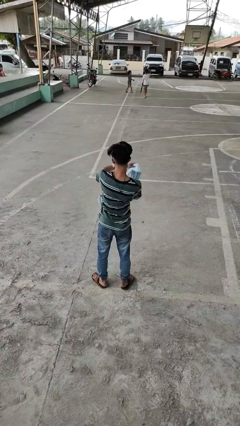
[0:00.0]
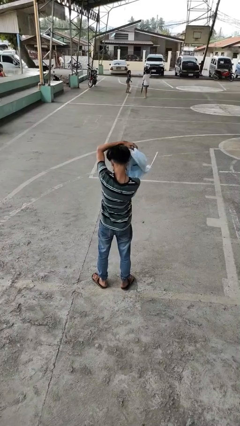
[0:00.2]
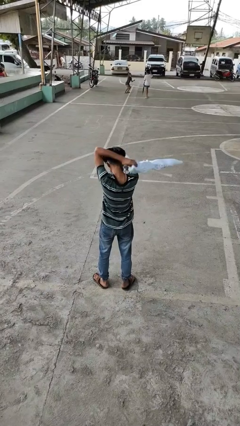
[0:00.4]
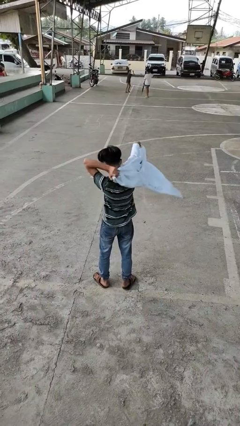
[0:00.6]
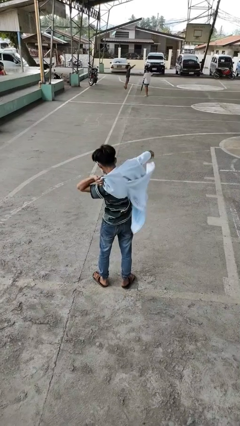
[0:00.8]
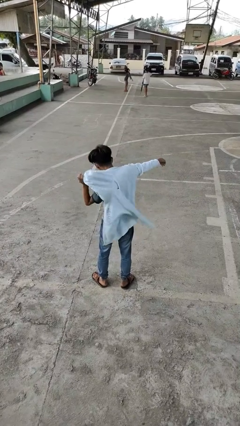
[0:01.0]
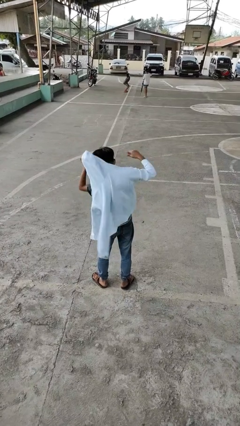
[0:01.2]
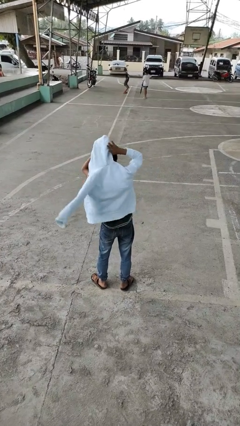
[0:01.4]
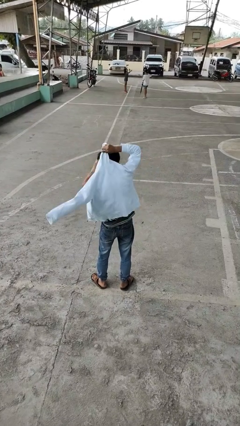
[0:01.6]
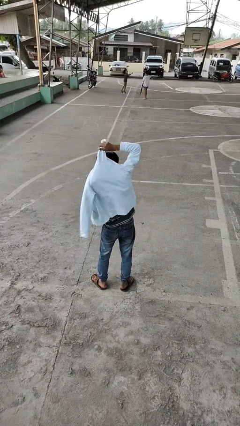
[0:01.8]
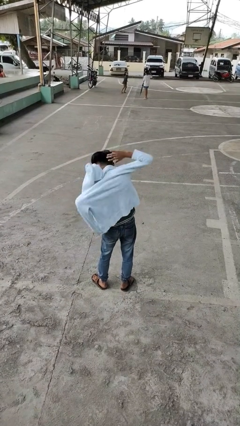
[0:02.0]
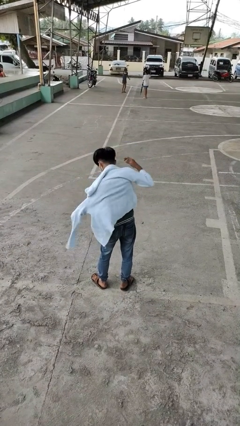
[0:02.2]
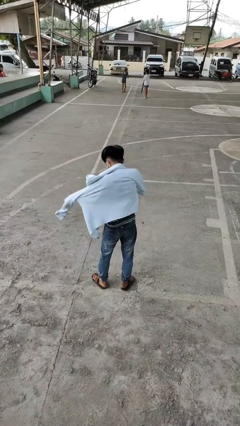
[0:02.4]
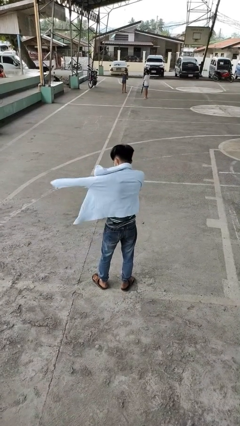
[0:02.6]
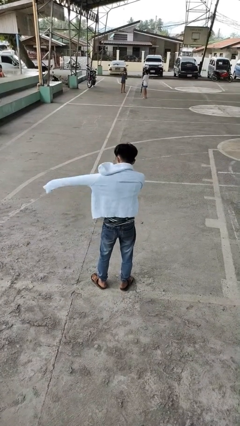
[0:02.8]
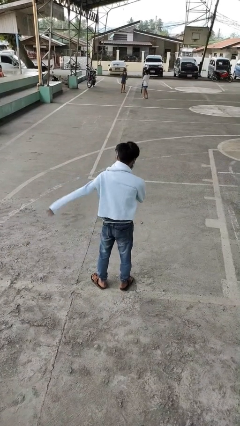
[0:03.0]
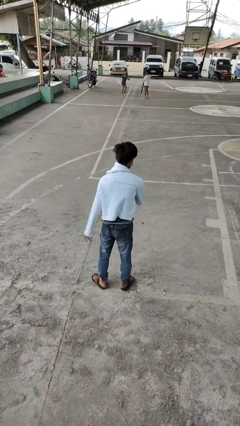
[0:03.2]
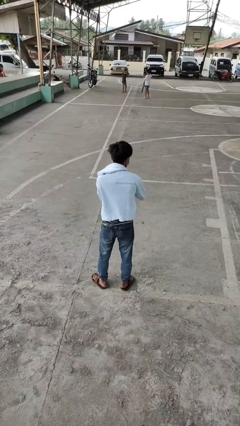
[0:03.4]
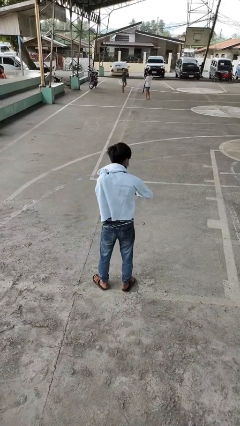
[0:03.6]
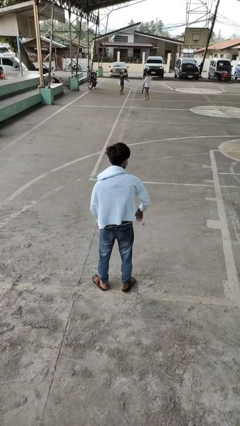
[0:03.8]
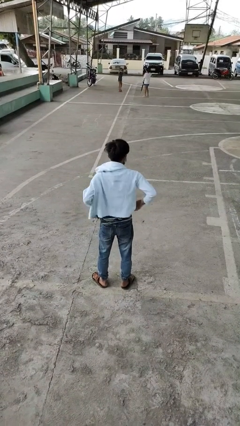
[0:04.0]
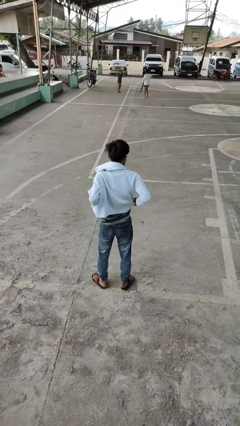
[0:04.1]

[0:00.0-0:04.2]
person puts on jacket

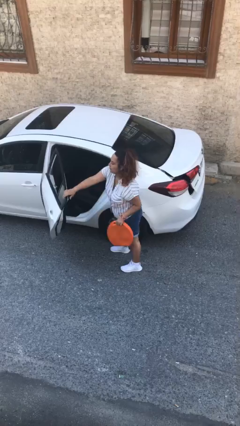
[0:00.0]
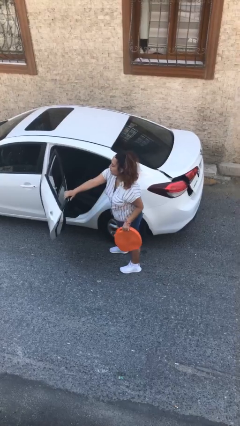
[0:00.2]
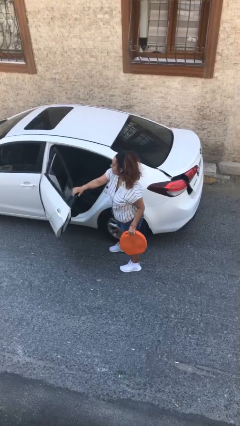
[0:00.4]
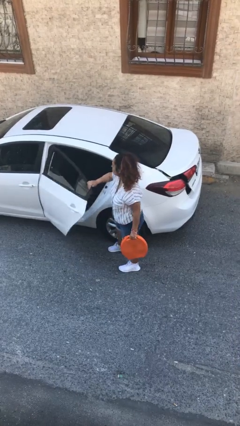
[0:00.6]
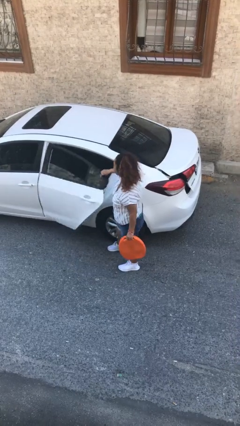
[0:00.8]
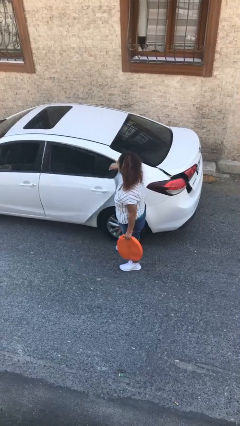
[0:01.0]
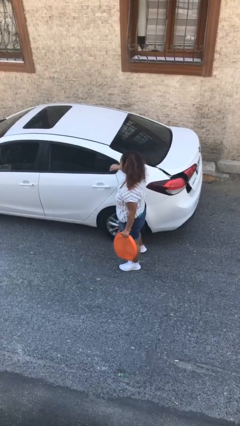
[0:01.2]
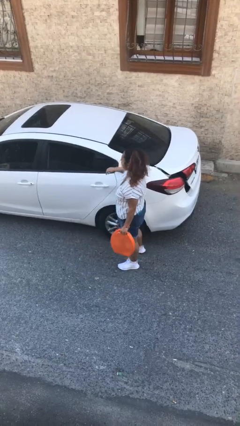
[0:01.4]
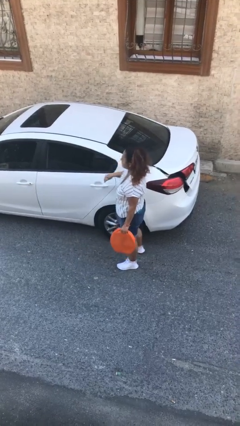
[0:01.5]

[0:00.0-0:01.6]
person closes car door

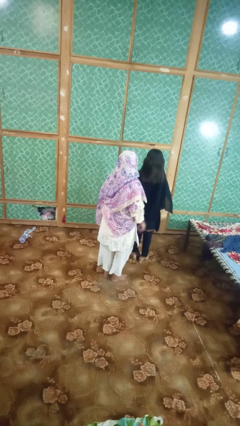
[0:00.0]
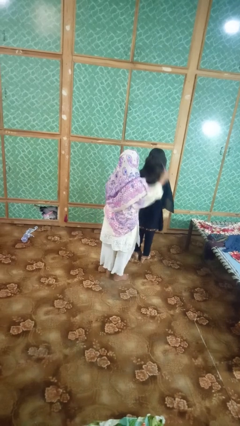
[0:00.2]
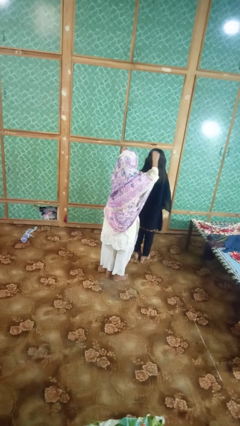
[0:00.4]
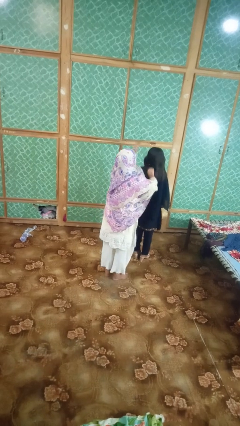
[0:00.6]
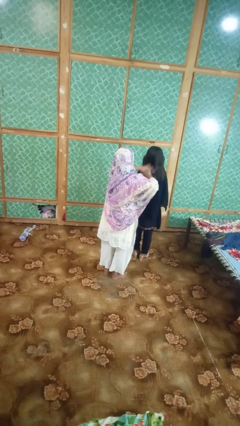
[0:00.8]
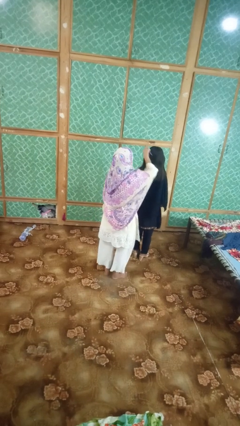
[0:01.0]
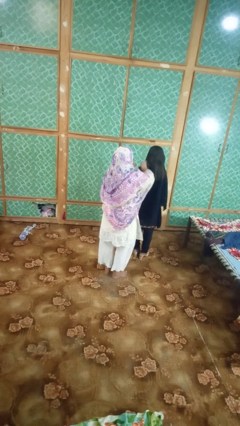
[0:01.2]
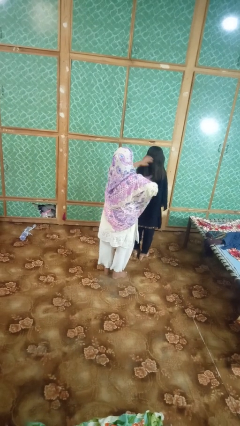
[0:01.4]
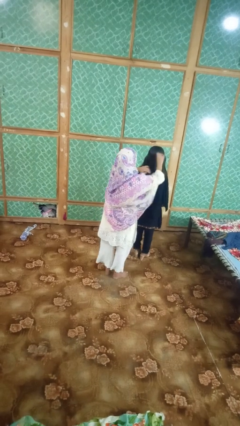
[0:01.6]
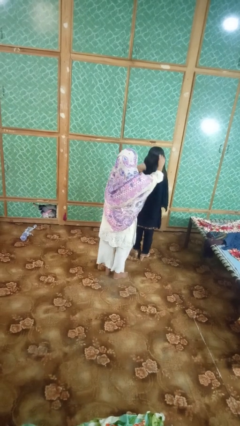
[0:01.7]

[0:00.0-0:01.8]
person brushes hair of person

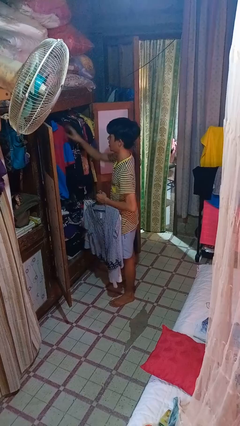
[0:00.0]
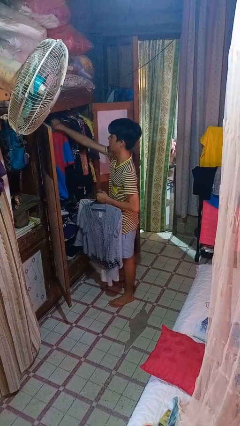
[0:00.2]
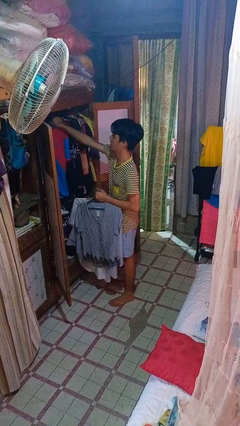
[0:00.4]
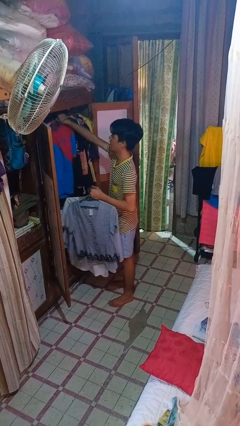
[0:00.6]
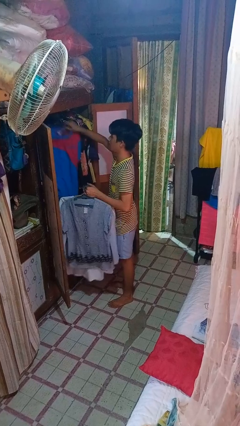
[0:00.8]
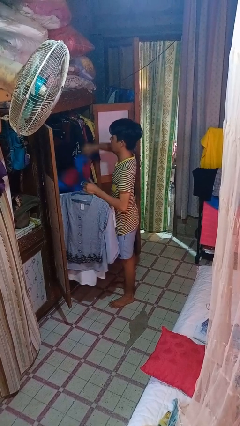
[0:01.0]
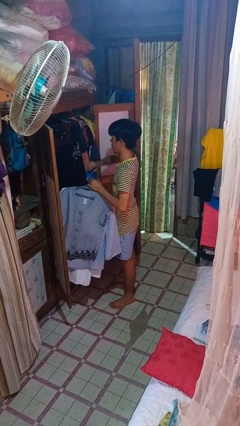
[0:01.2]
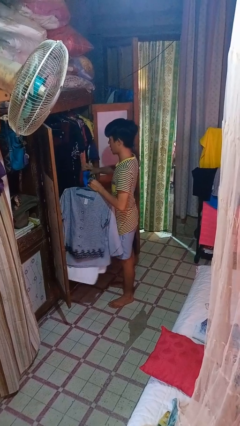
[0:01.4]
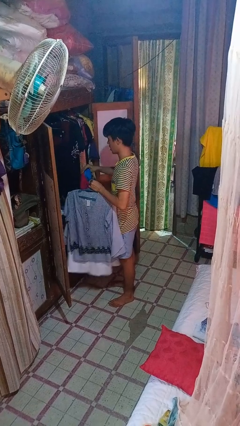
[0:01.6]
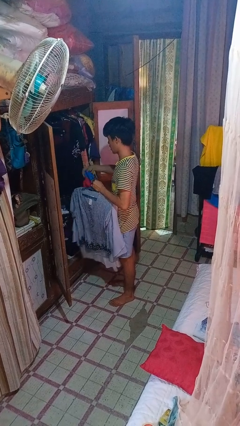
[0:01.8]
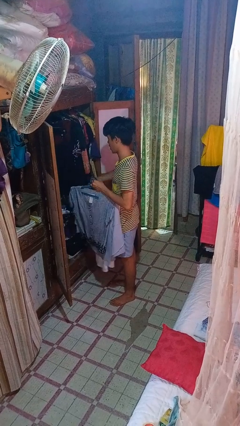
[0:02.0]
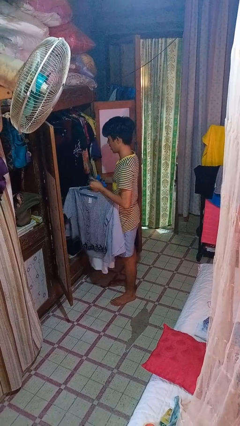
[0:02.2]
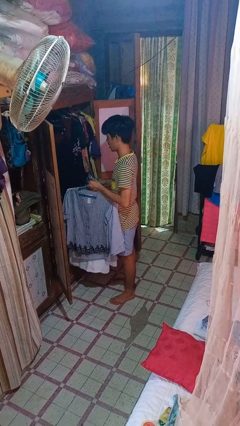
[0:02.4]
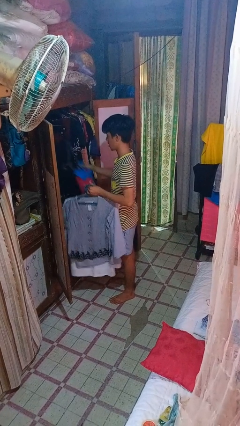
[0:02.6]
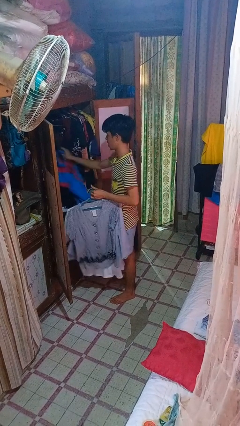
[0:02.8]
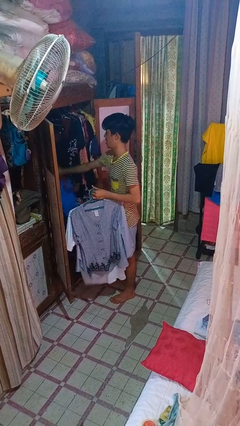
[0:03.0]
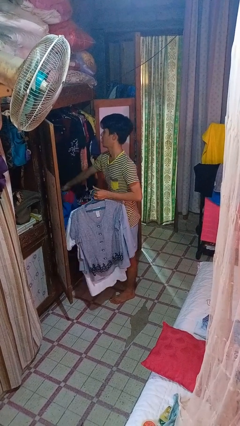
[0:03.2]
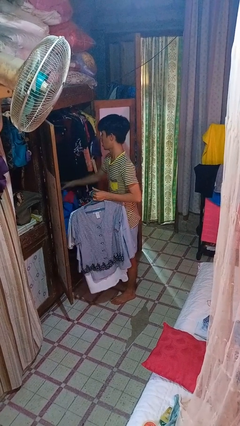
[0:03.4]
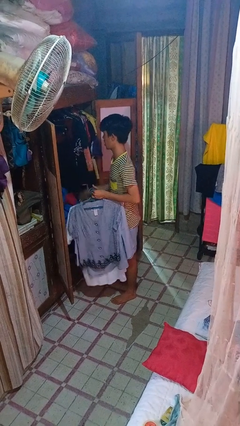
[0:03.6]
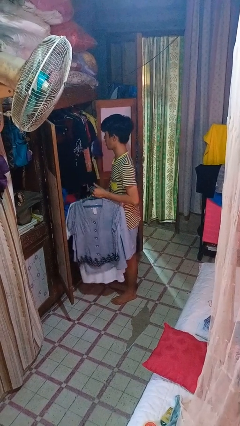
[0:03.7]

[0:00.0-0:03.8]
person takes clothes from closet

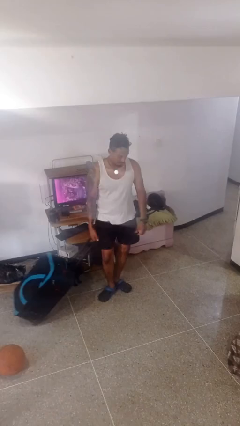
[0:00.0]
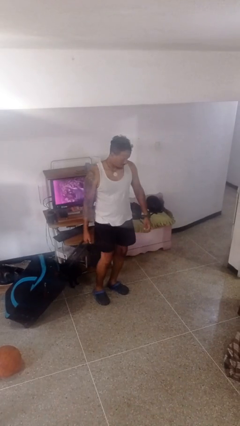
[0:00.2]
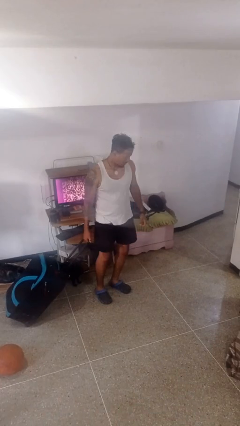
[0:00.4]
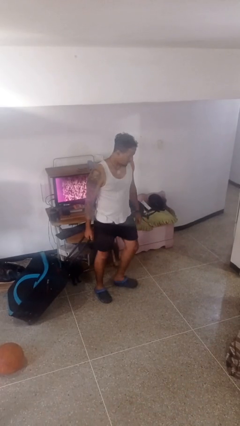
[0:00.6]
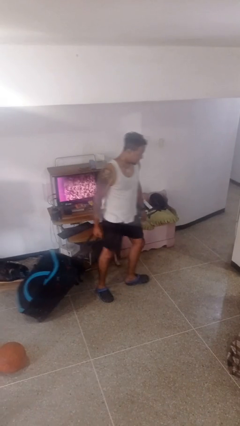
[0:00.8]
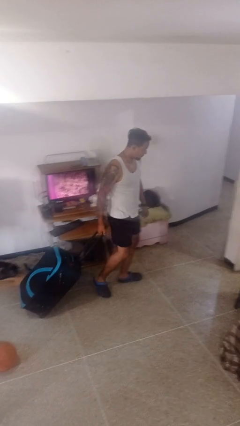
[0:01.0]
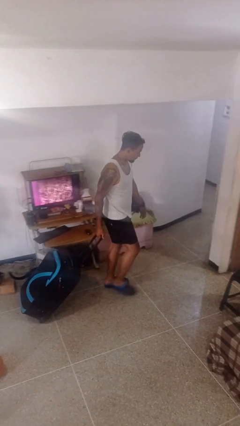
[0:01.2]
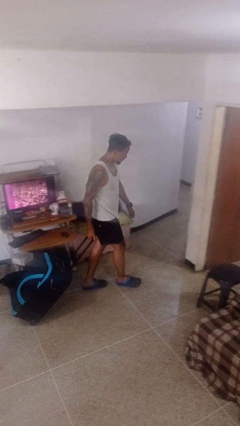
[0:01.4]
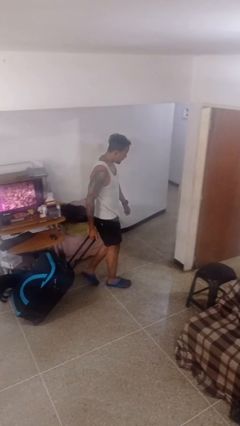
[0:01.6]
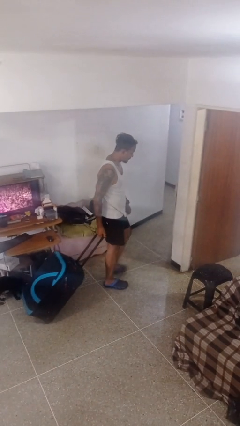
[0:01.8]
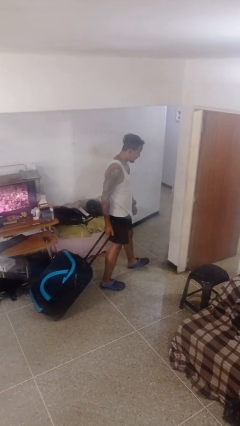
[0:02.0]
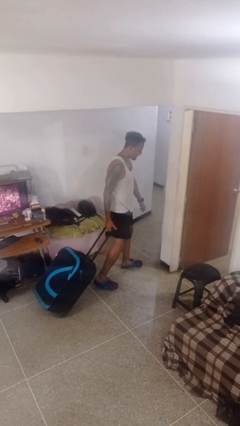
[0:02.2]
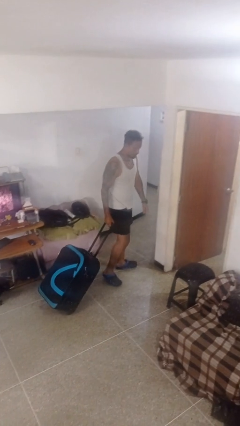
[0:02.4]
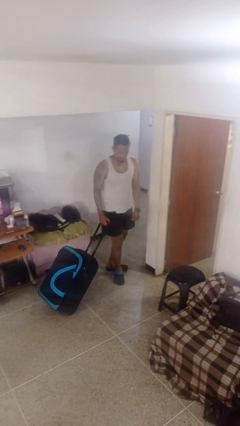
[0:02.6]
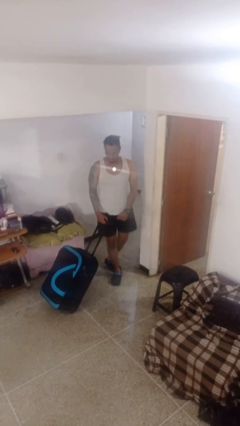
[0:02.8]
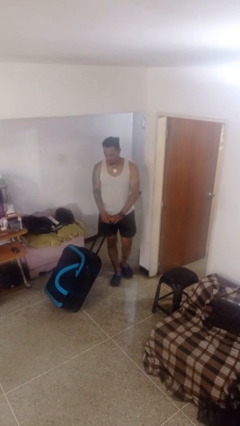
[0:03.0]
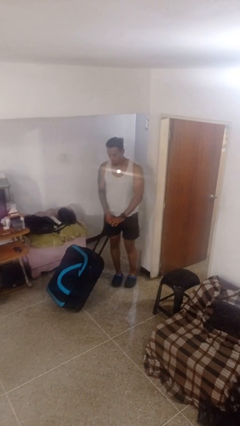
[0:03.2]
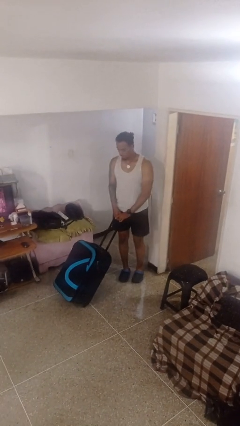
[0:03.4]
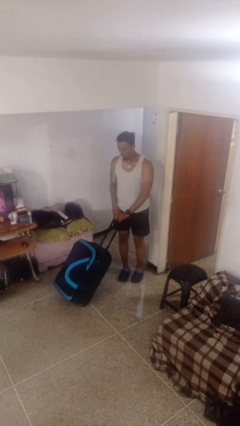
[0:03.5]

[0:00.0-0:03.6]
person pulls wheeled cart

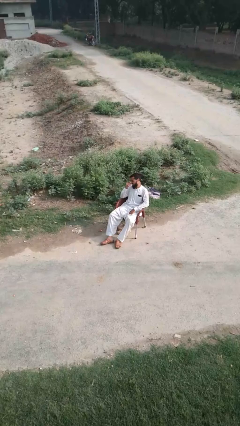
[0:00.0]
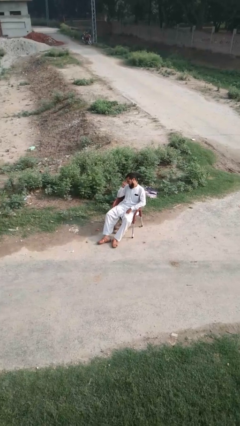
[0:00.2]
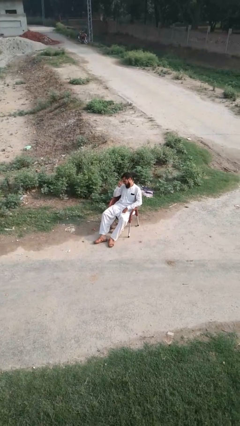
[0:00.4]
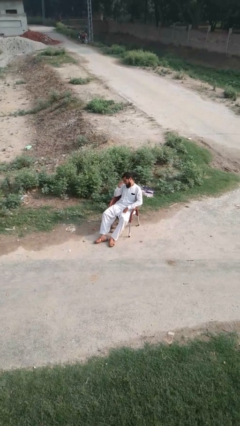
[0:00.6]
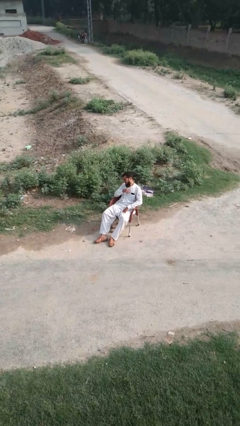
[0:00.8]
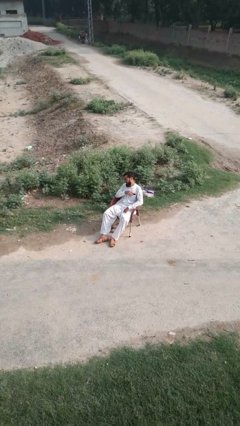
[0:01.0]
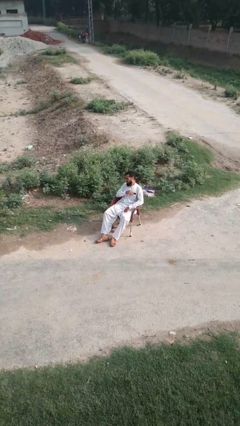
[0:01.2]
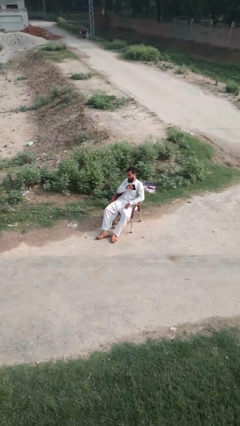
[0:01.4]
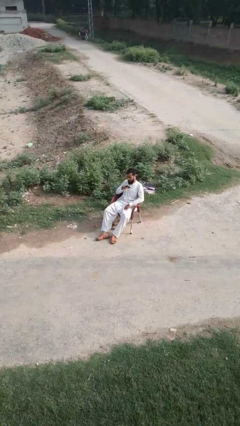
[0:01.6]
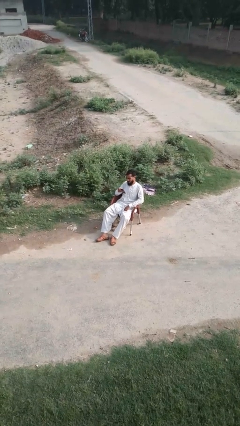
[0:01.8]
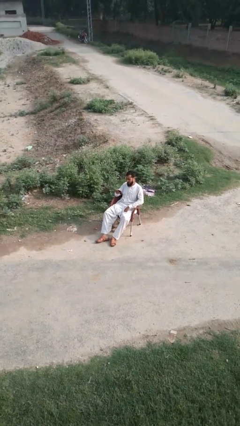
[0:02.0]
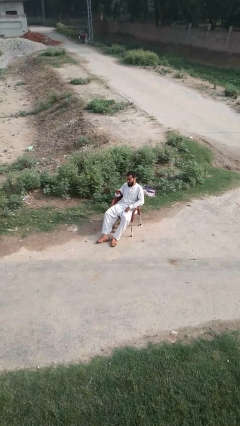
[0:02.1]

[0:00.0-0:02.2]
person takes phone from pocket

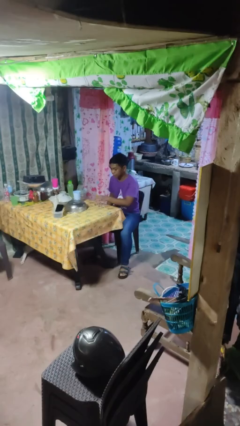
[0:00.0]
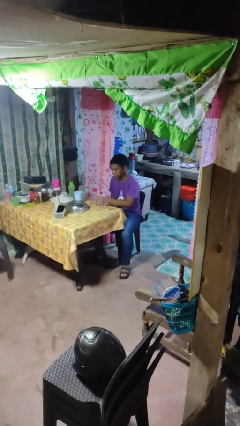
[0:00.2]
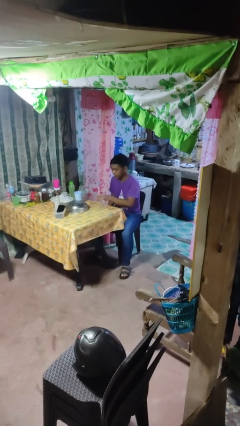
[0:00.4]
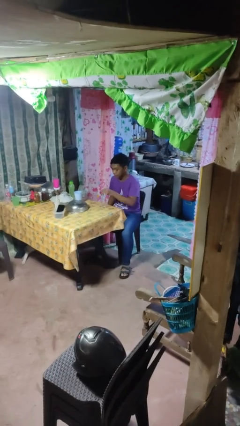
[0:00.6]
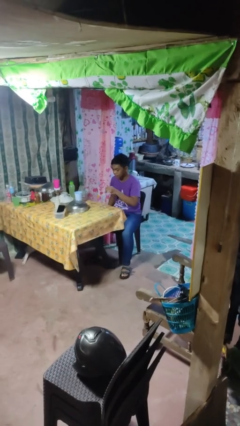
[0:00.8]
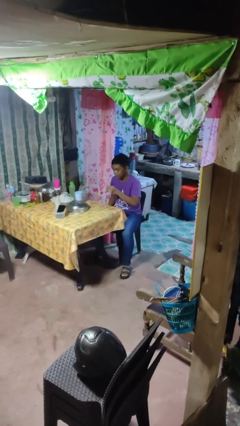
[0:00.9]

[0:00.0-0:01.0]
person picks up object from table
